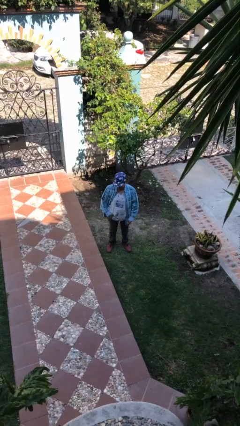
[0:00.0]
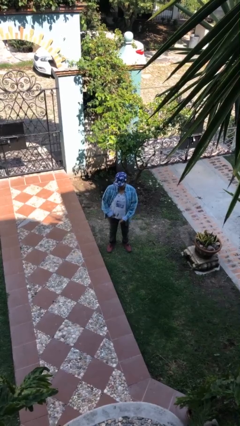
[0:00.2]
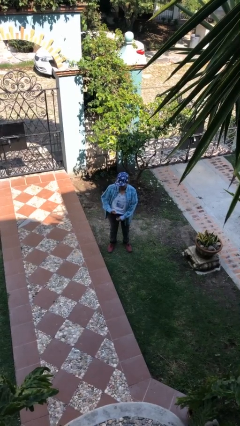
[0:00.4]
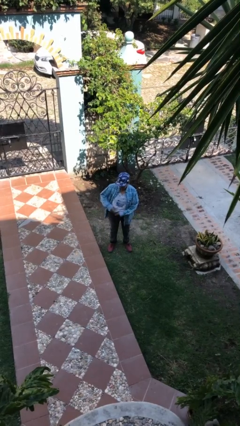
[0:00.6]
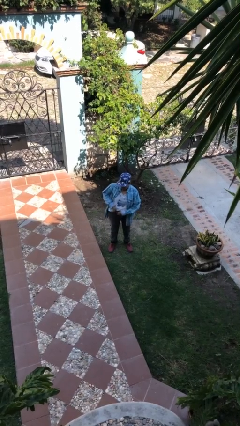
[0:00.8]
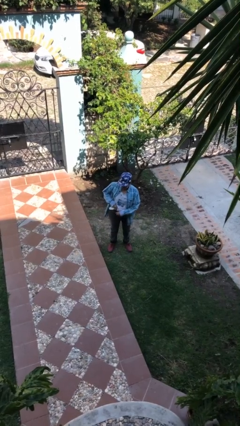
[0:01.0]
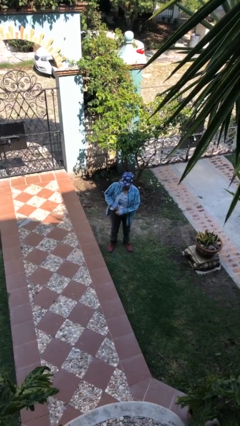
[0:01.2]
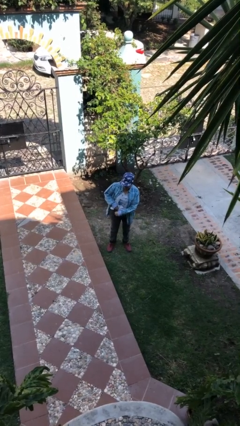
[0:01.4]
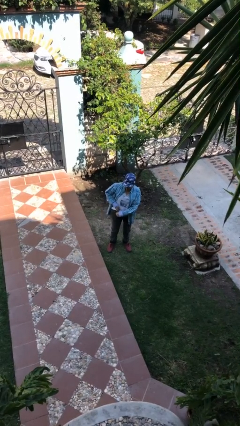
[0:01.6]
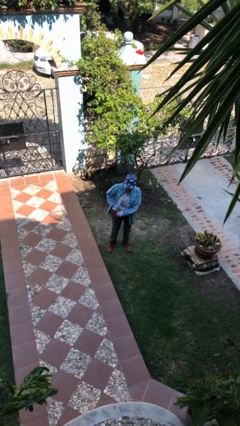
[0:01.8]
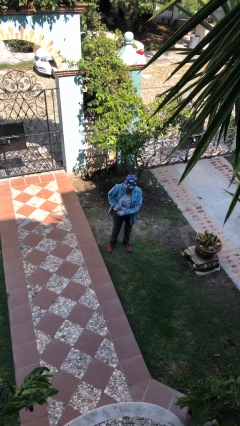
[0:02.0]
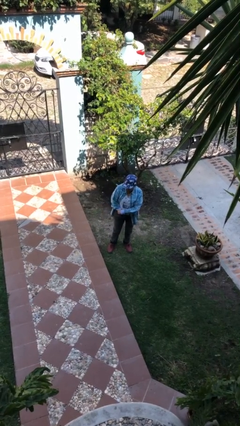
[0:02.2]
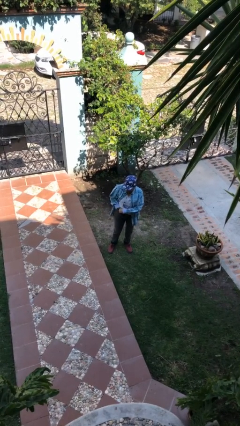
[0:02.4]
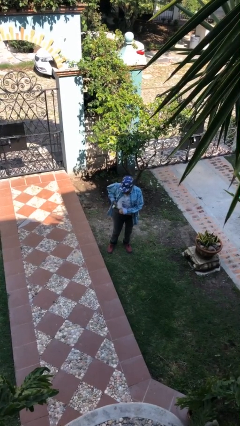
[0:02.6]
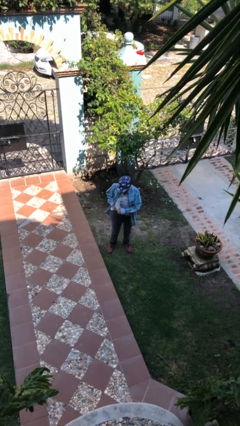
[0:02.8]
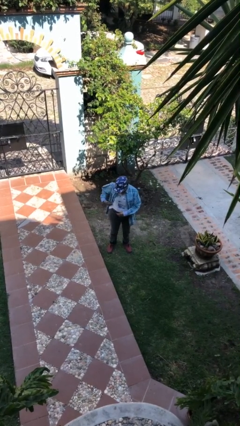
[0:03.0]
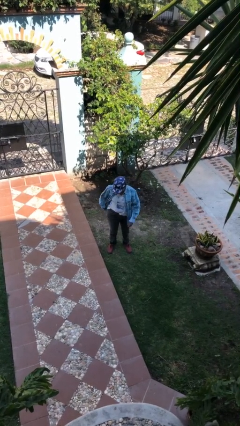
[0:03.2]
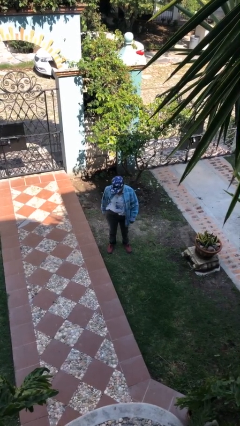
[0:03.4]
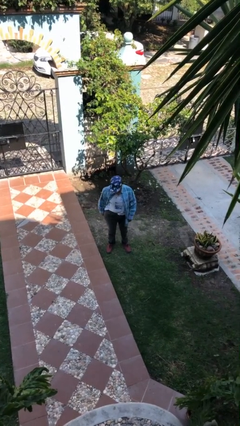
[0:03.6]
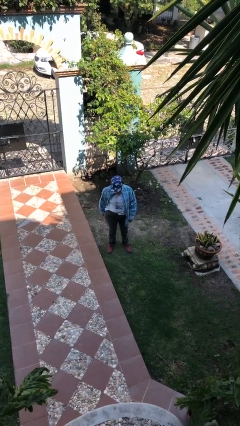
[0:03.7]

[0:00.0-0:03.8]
person tucks in shirt

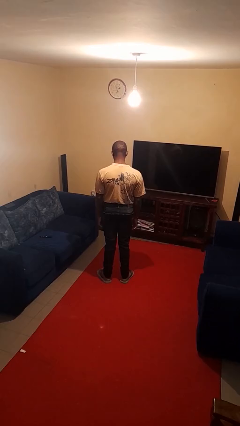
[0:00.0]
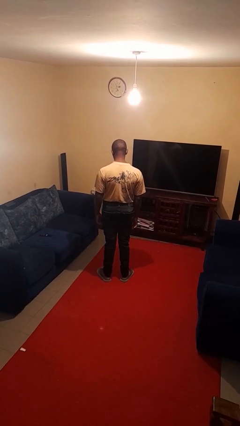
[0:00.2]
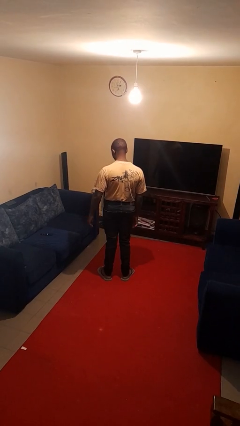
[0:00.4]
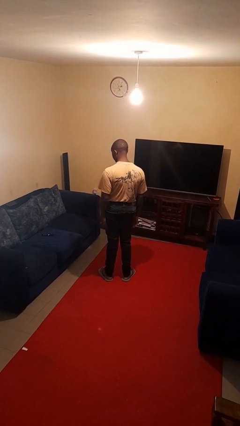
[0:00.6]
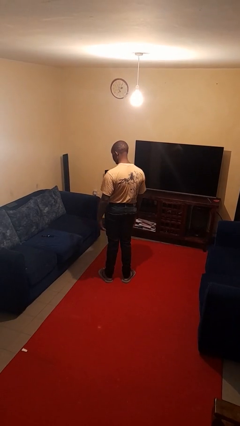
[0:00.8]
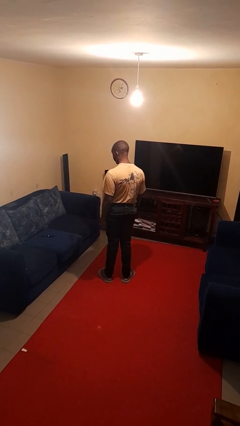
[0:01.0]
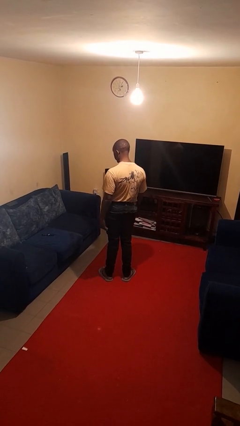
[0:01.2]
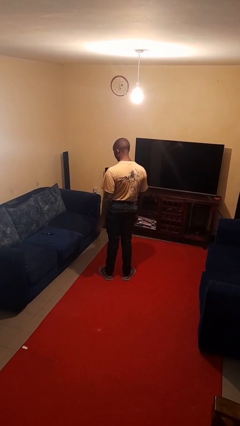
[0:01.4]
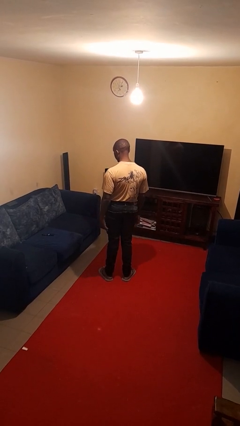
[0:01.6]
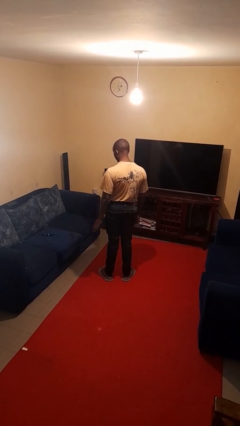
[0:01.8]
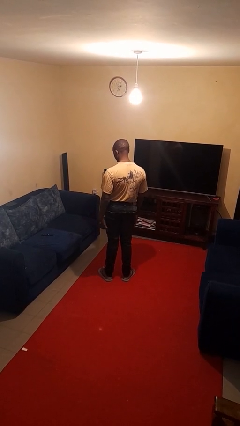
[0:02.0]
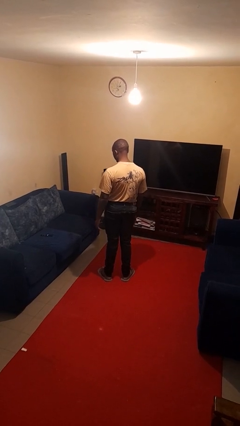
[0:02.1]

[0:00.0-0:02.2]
person slaps hands on thighs

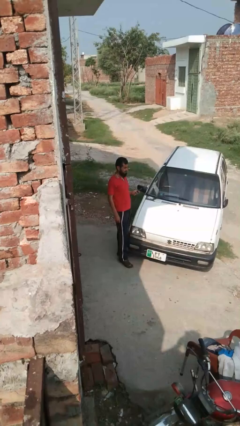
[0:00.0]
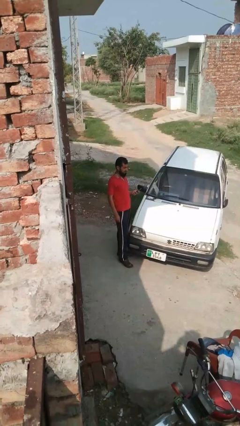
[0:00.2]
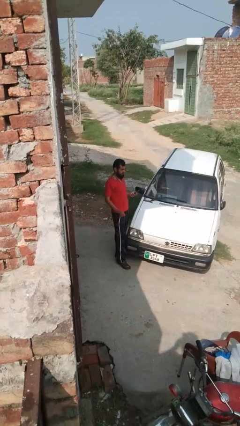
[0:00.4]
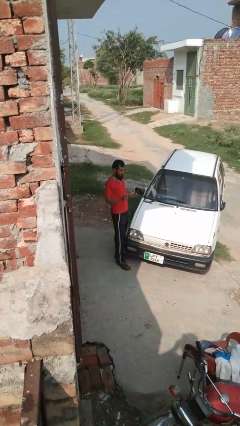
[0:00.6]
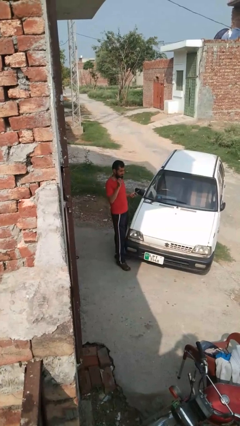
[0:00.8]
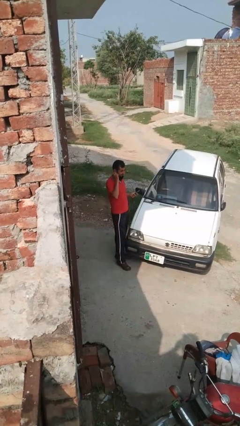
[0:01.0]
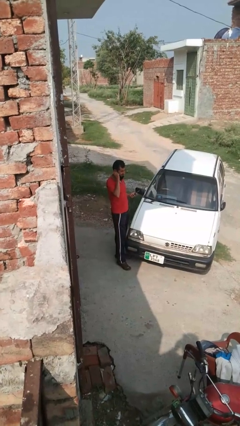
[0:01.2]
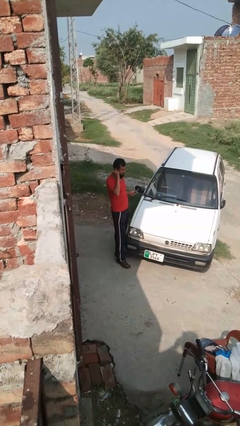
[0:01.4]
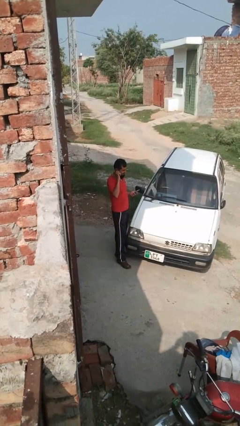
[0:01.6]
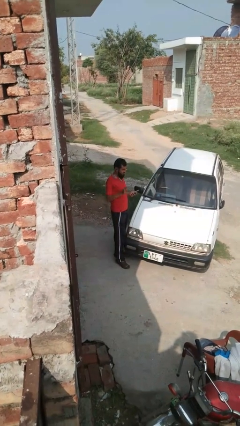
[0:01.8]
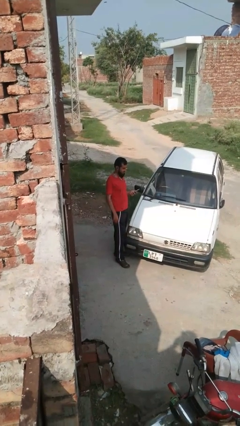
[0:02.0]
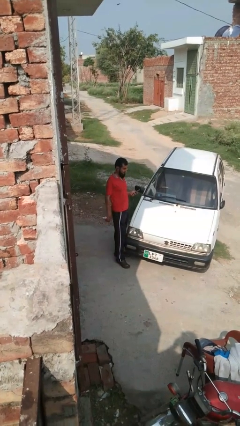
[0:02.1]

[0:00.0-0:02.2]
person puts on headphones

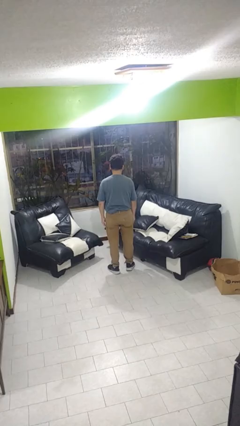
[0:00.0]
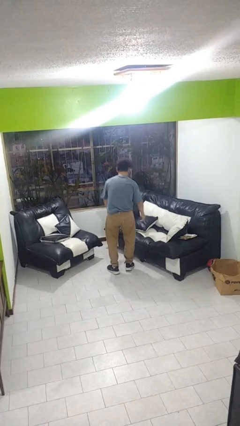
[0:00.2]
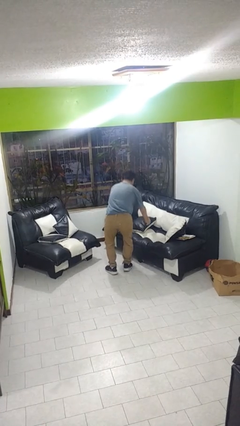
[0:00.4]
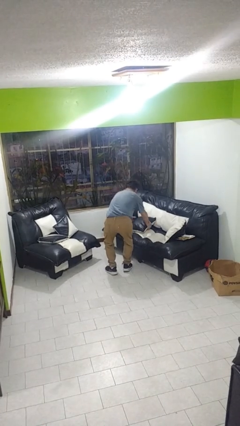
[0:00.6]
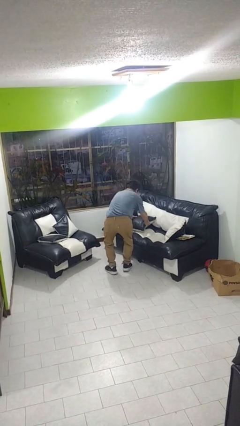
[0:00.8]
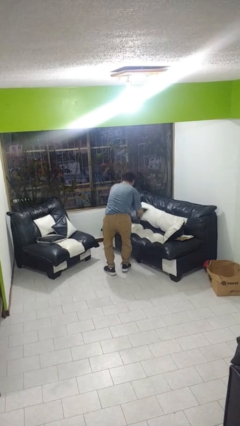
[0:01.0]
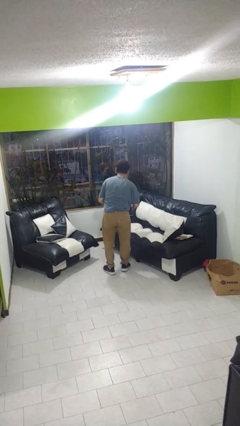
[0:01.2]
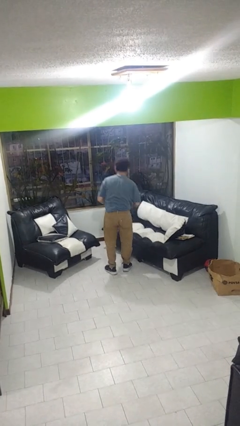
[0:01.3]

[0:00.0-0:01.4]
person picks up object from couch

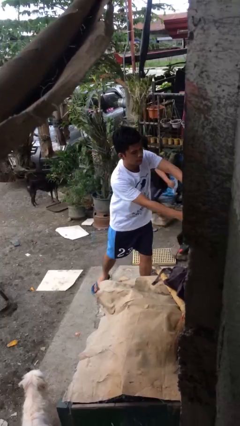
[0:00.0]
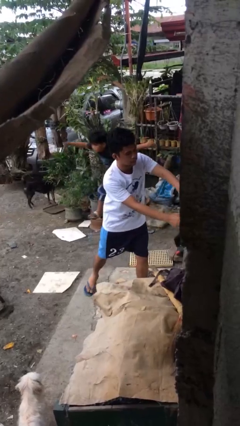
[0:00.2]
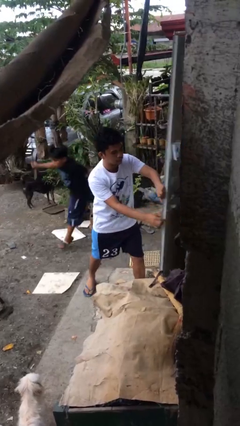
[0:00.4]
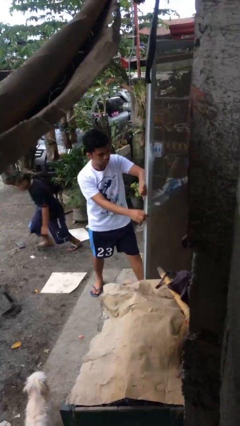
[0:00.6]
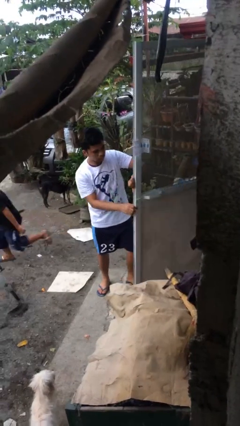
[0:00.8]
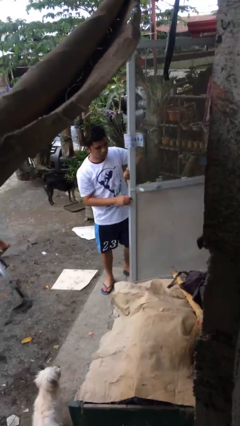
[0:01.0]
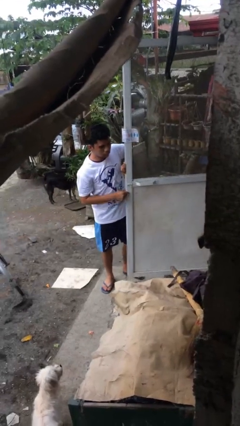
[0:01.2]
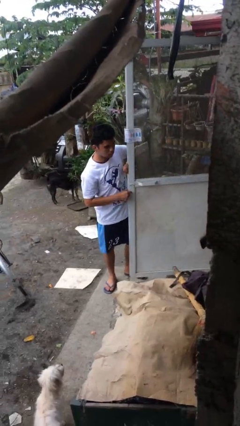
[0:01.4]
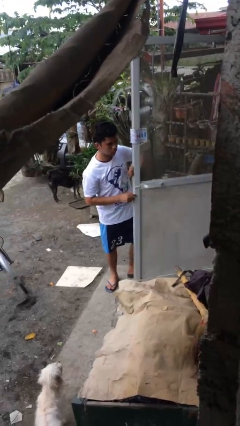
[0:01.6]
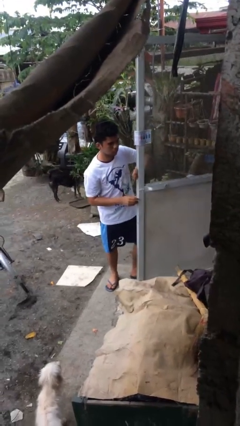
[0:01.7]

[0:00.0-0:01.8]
person opens facility door

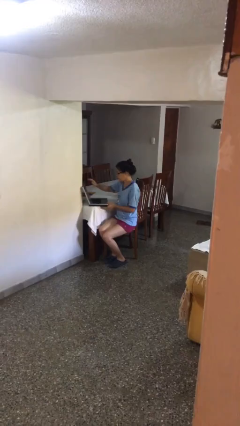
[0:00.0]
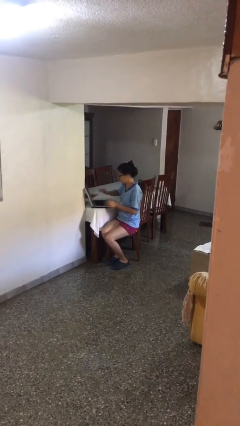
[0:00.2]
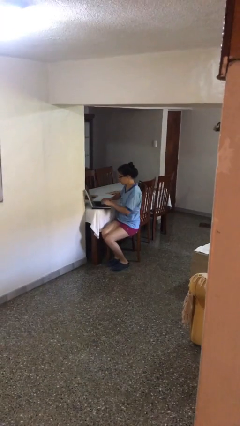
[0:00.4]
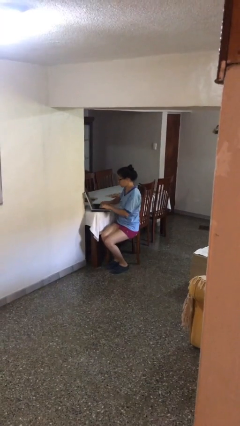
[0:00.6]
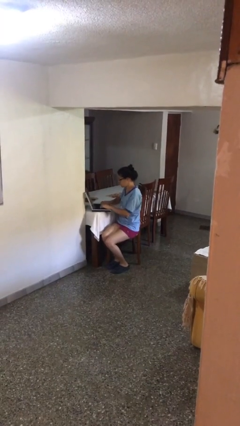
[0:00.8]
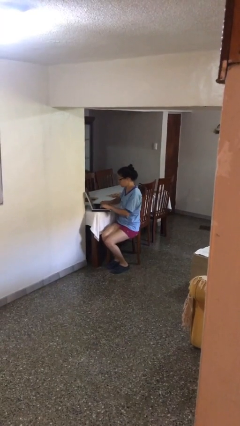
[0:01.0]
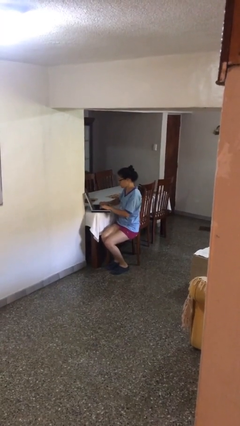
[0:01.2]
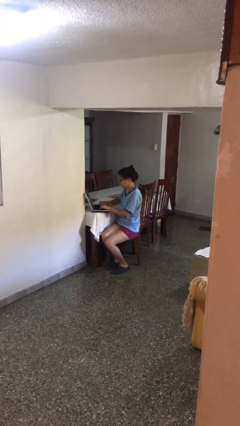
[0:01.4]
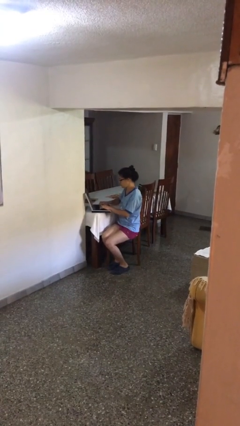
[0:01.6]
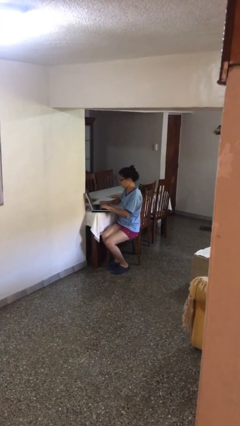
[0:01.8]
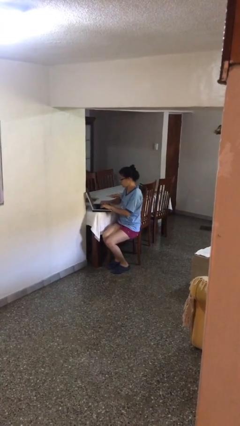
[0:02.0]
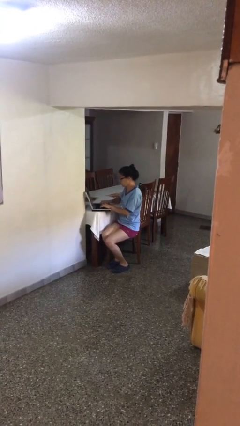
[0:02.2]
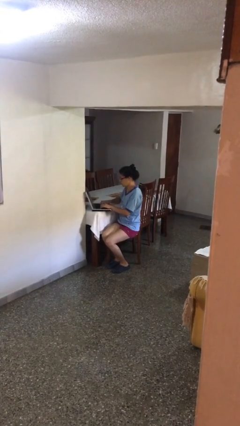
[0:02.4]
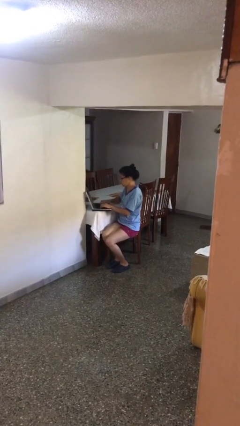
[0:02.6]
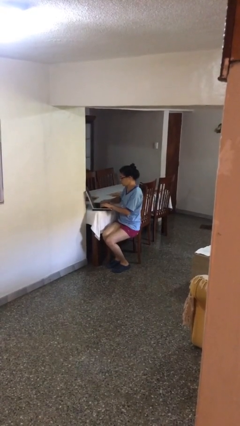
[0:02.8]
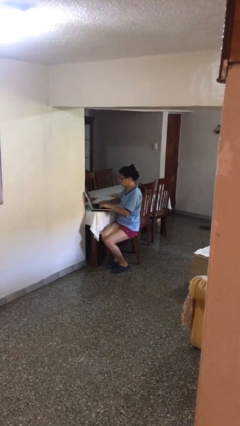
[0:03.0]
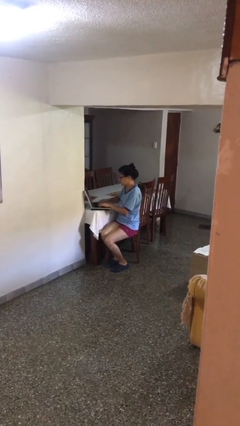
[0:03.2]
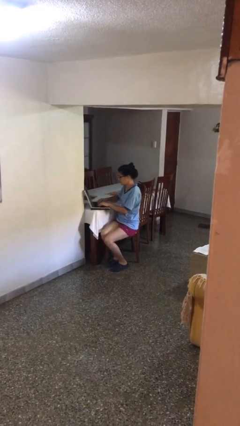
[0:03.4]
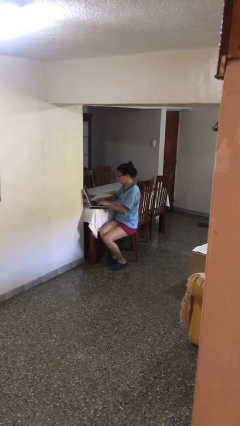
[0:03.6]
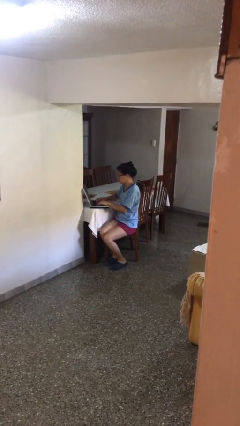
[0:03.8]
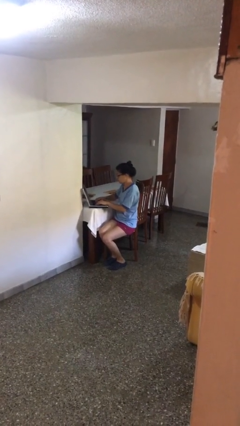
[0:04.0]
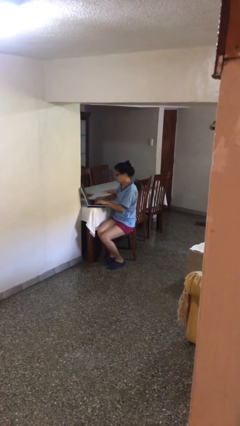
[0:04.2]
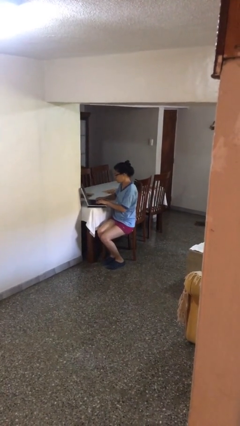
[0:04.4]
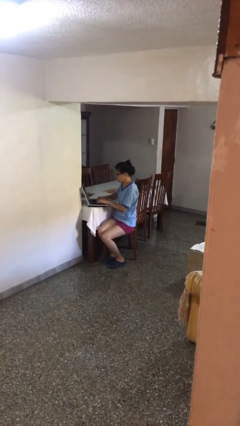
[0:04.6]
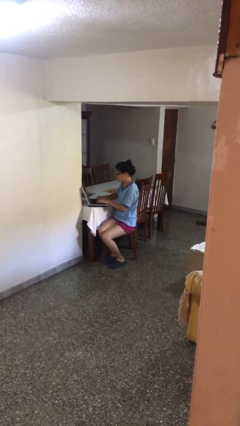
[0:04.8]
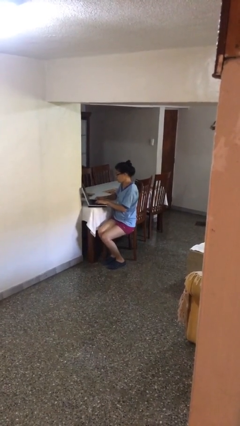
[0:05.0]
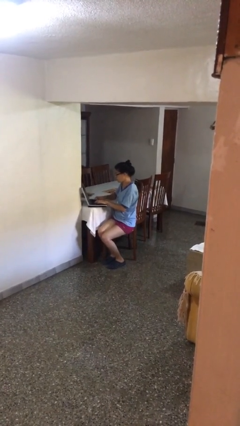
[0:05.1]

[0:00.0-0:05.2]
person interacts with laptop

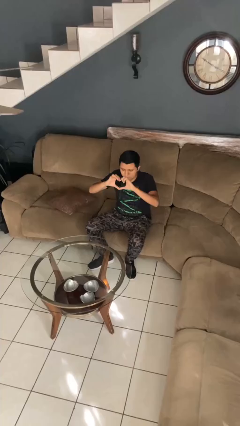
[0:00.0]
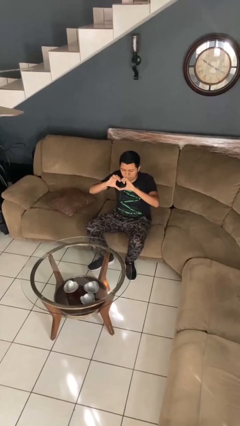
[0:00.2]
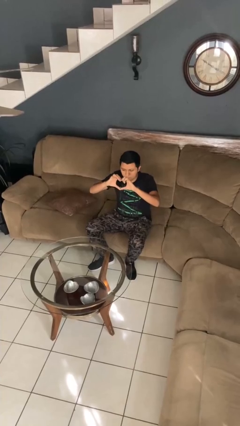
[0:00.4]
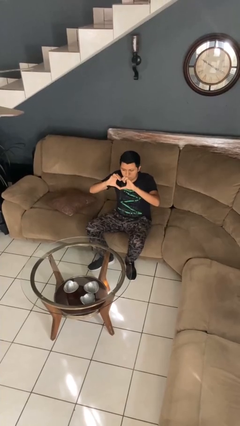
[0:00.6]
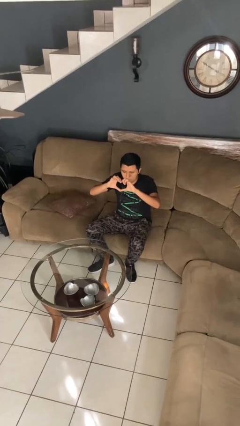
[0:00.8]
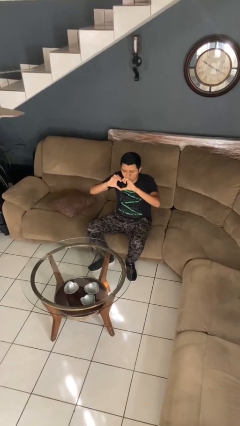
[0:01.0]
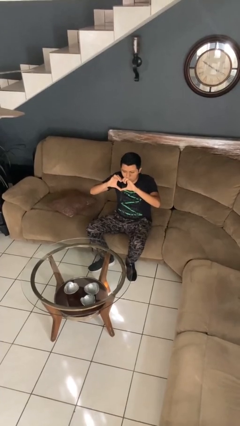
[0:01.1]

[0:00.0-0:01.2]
person gestures heart
